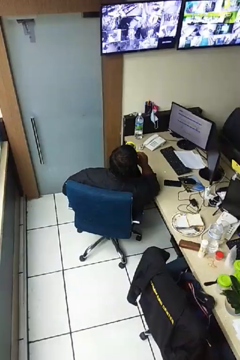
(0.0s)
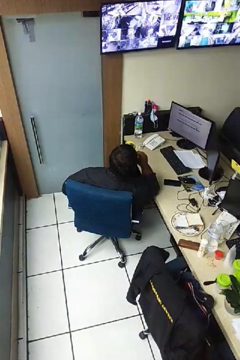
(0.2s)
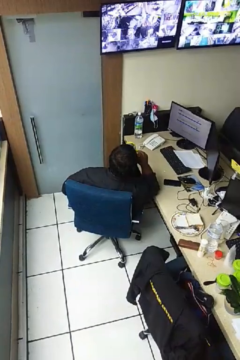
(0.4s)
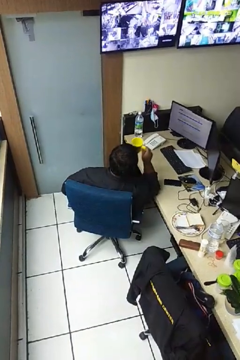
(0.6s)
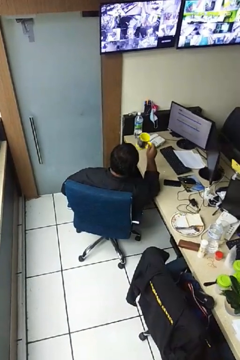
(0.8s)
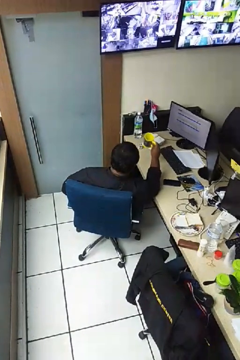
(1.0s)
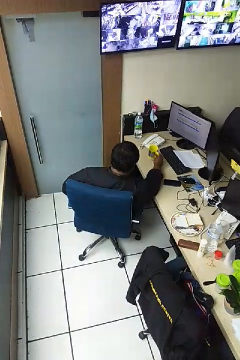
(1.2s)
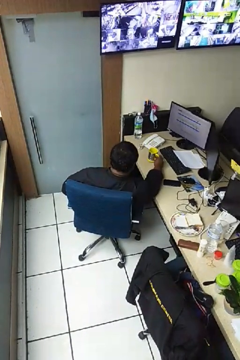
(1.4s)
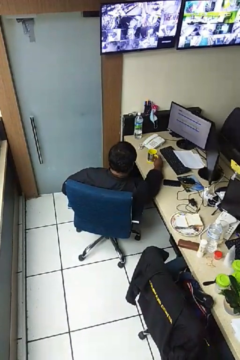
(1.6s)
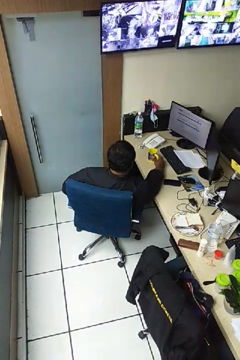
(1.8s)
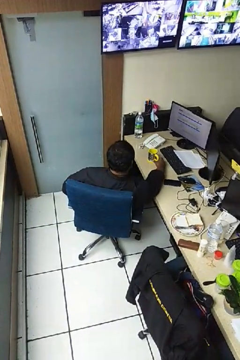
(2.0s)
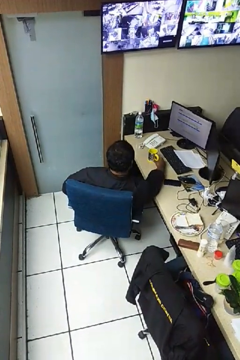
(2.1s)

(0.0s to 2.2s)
person puts down object on table

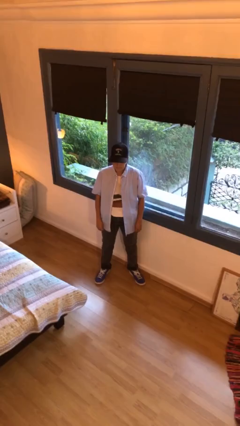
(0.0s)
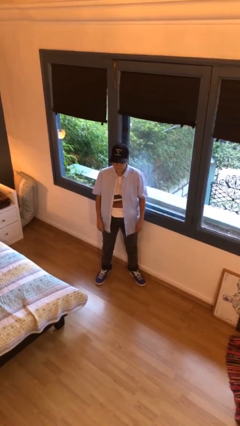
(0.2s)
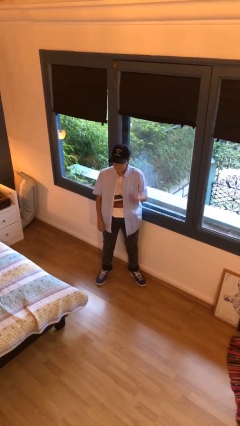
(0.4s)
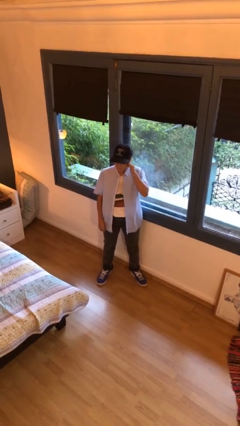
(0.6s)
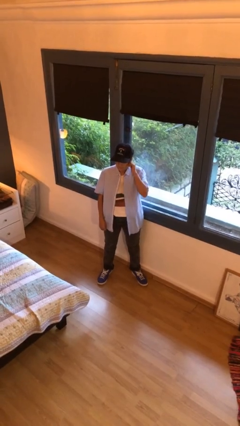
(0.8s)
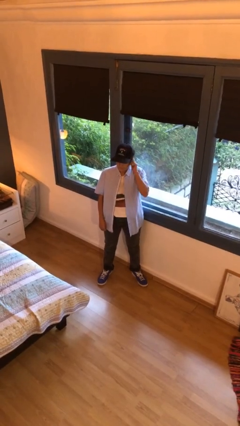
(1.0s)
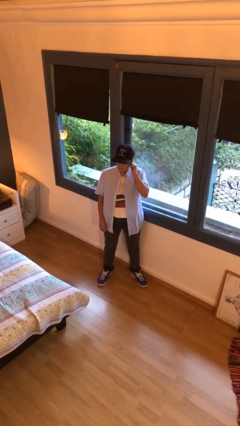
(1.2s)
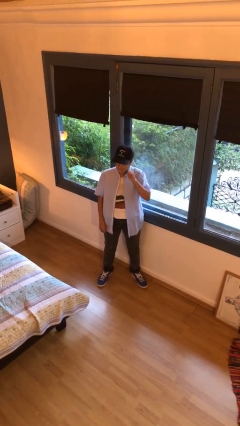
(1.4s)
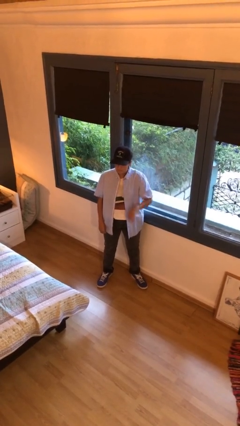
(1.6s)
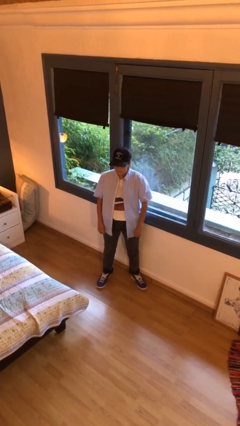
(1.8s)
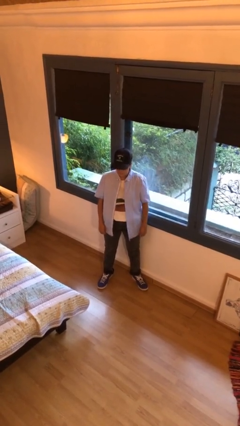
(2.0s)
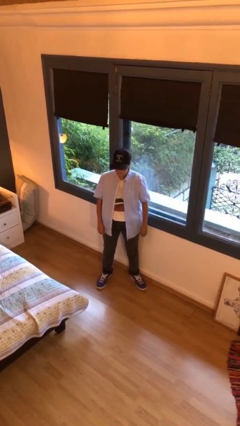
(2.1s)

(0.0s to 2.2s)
person touches earlobe

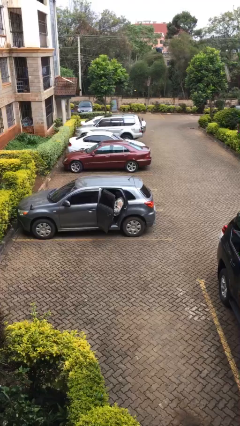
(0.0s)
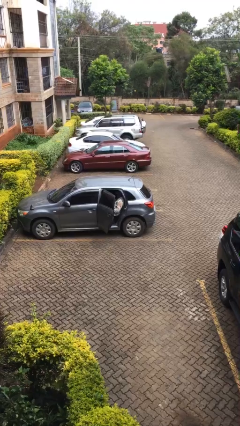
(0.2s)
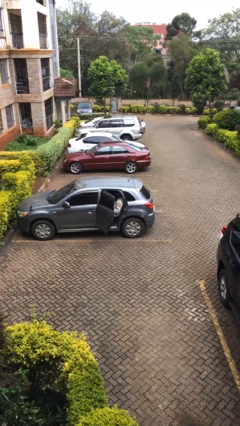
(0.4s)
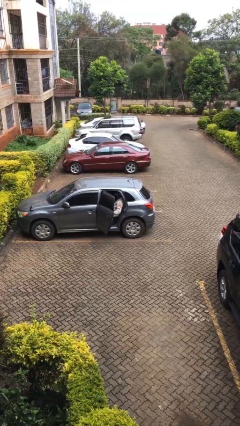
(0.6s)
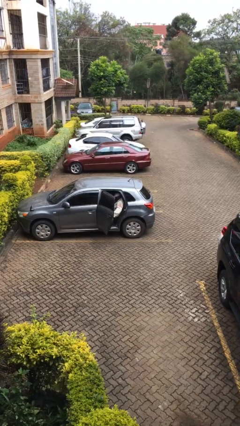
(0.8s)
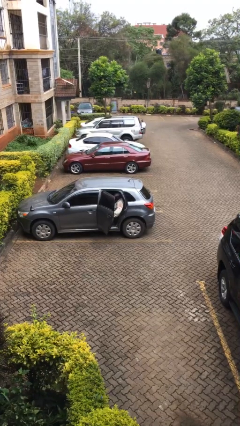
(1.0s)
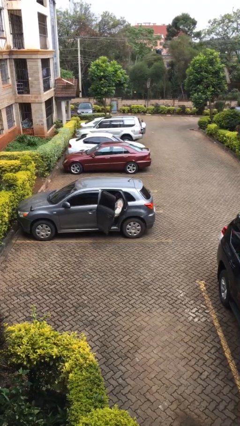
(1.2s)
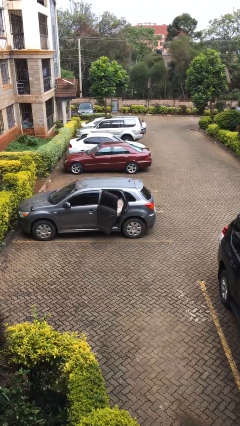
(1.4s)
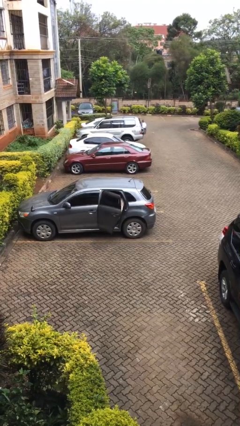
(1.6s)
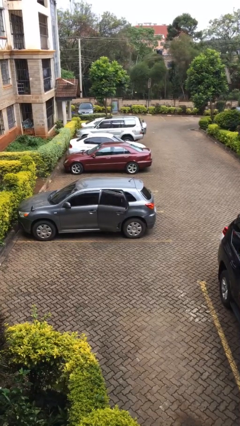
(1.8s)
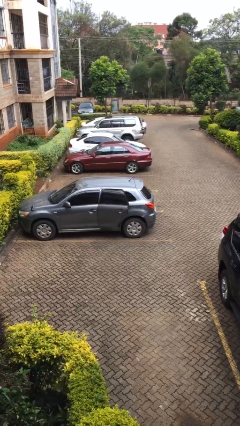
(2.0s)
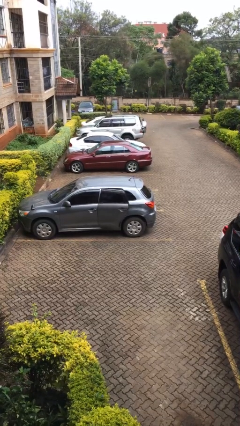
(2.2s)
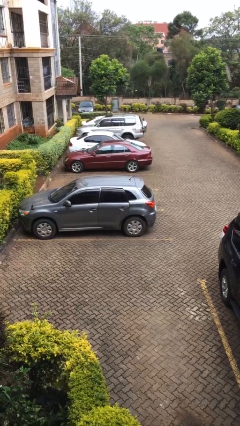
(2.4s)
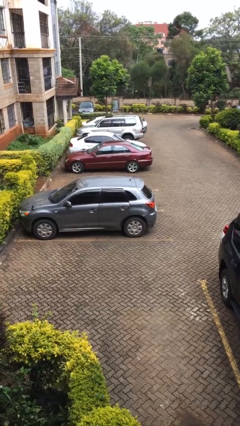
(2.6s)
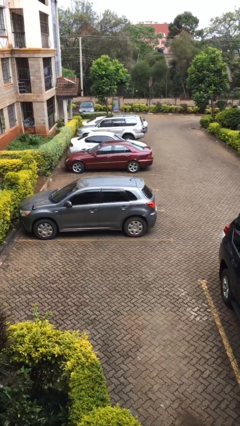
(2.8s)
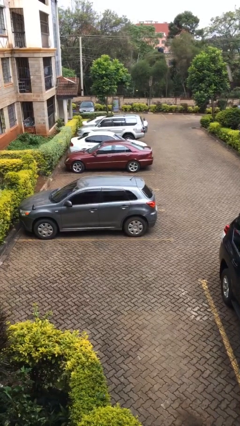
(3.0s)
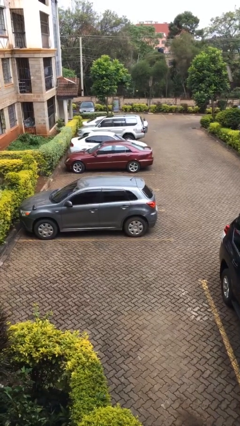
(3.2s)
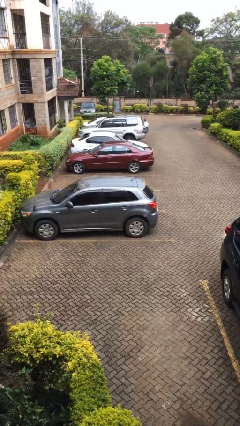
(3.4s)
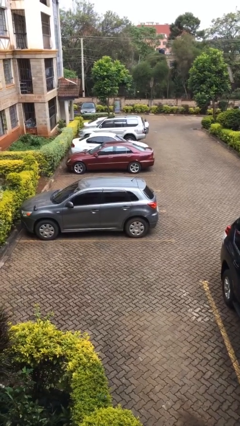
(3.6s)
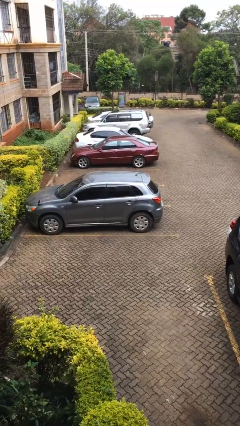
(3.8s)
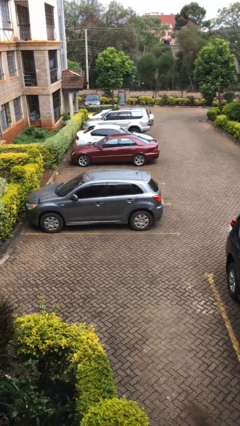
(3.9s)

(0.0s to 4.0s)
person closes car door

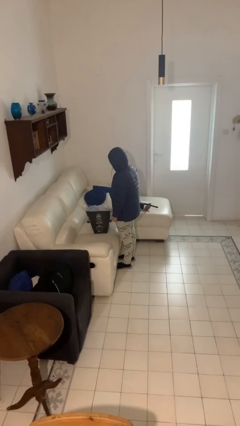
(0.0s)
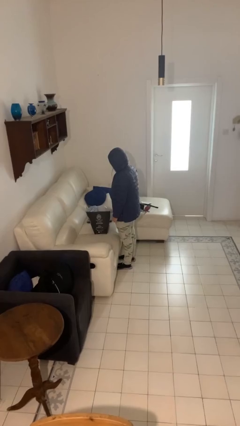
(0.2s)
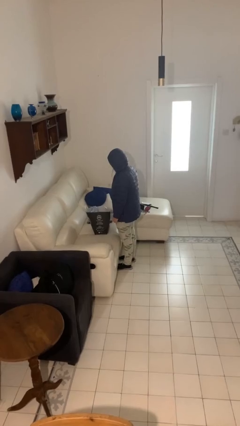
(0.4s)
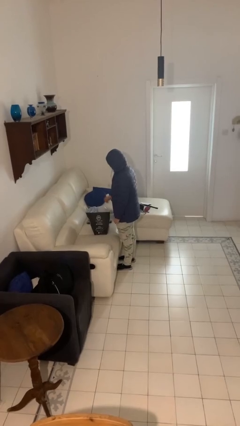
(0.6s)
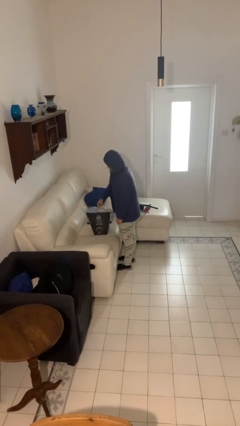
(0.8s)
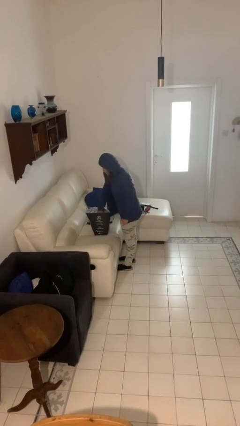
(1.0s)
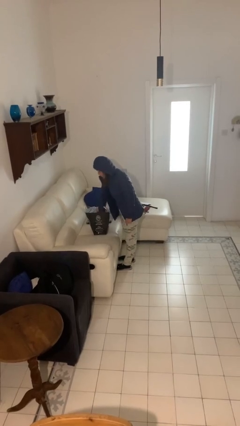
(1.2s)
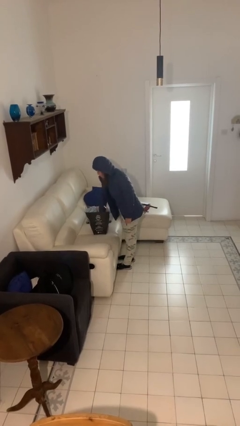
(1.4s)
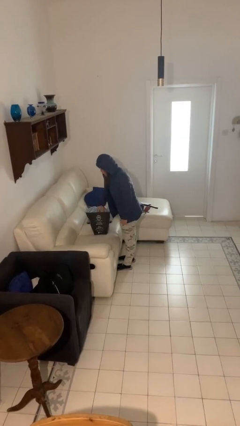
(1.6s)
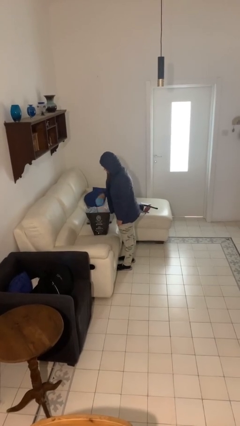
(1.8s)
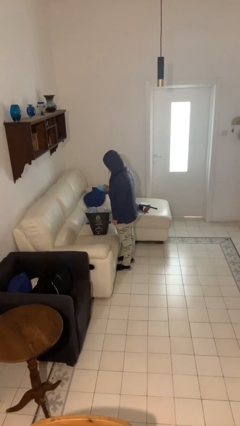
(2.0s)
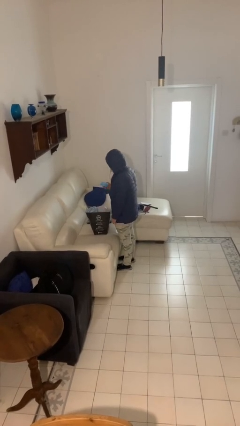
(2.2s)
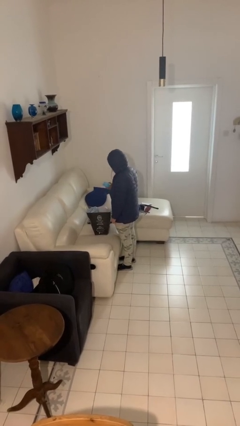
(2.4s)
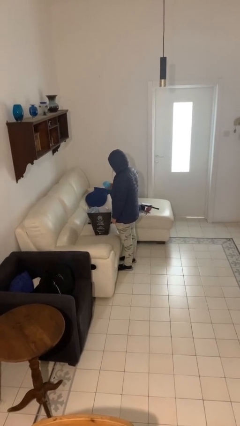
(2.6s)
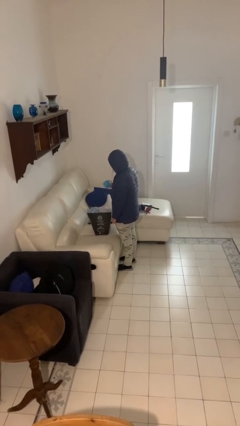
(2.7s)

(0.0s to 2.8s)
person takes object from bag

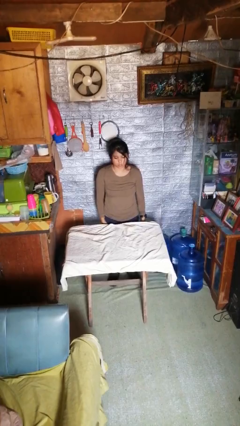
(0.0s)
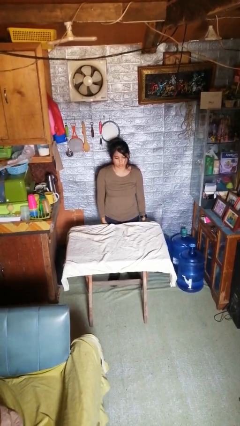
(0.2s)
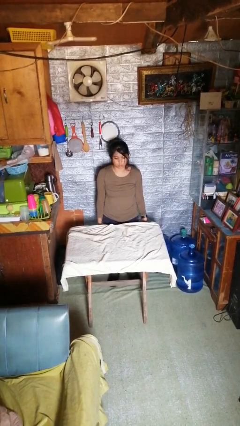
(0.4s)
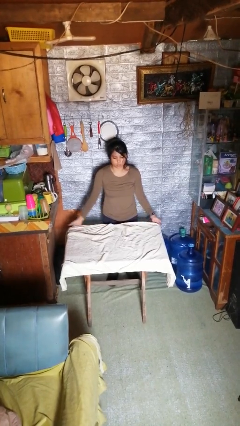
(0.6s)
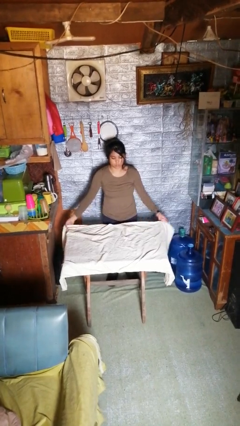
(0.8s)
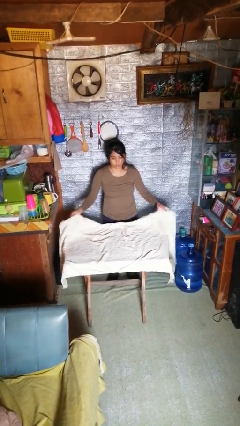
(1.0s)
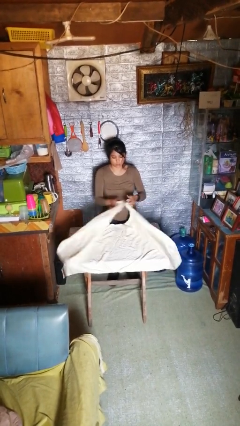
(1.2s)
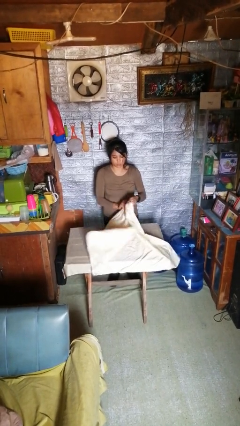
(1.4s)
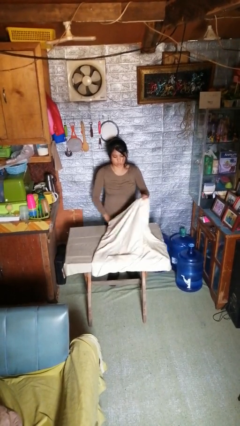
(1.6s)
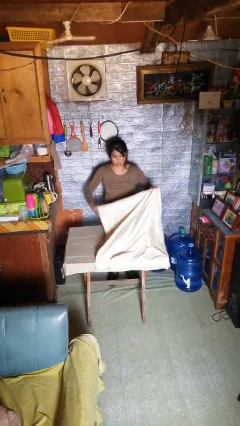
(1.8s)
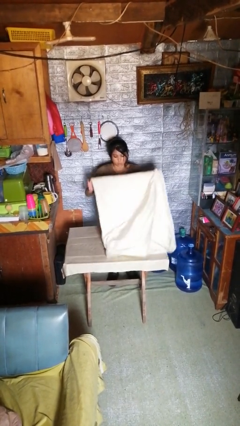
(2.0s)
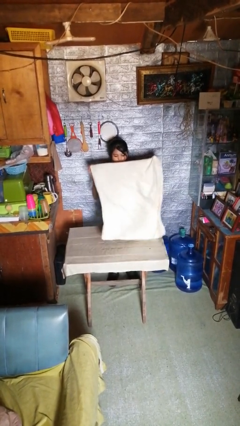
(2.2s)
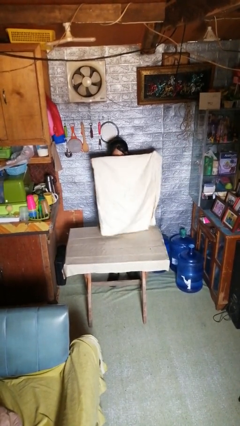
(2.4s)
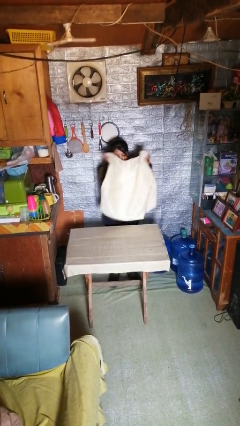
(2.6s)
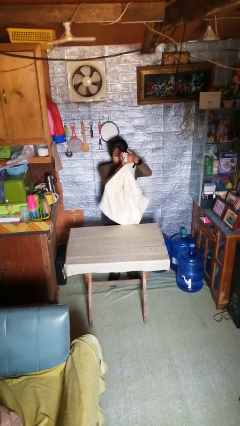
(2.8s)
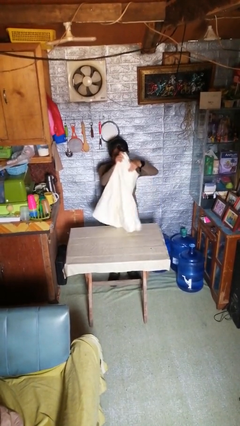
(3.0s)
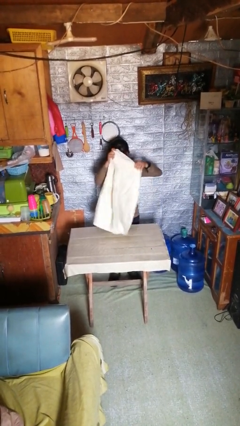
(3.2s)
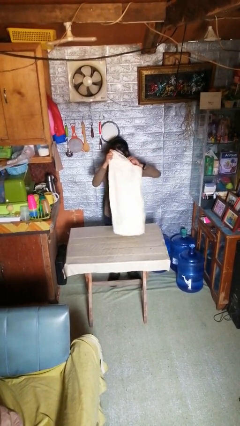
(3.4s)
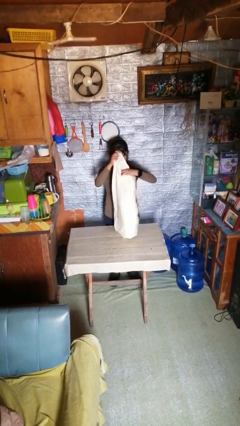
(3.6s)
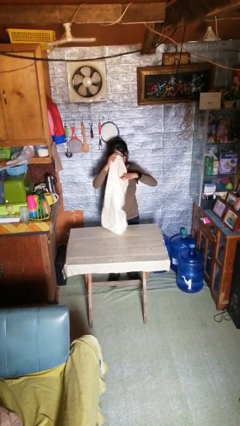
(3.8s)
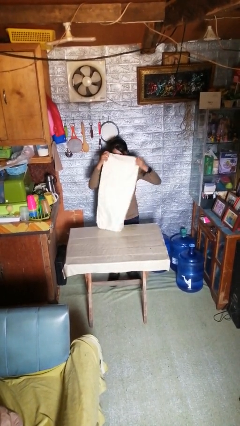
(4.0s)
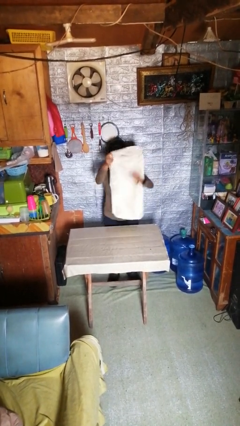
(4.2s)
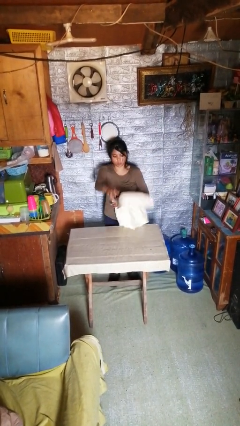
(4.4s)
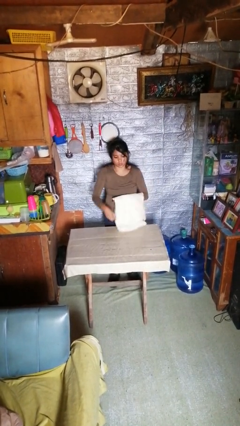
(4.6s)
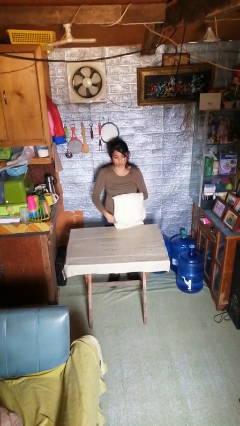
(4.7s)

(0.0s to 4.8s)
person folds tablecloth

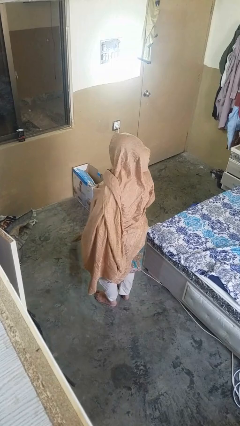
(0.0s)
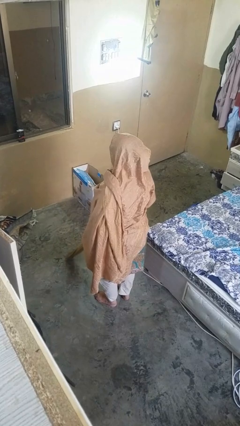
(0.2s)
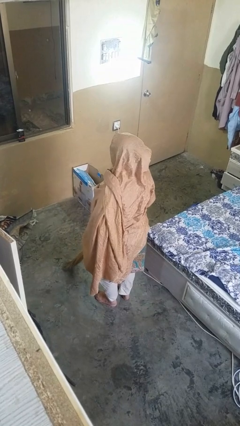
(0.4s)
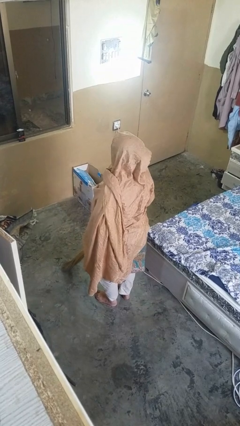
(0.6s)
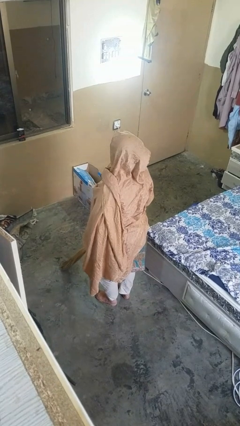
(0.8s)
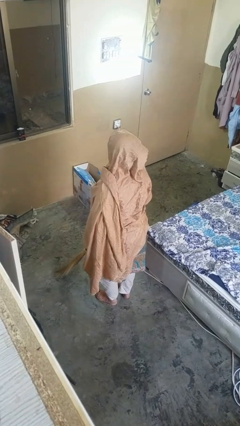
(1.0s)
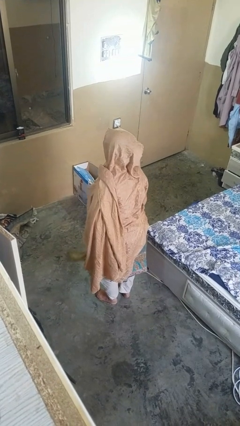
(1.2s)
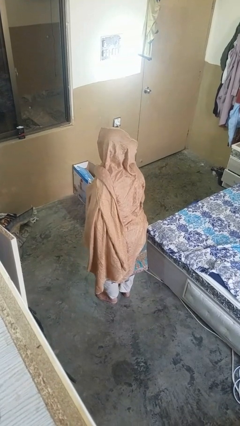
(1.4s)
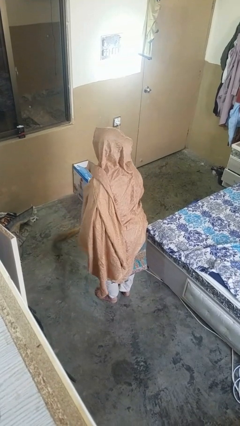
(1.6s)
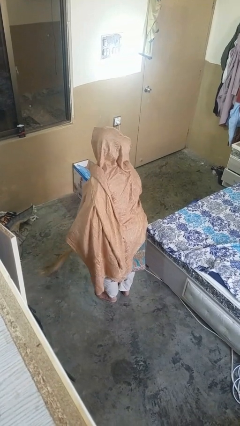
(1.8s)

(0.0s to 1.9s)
person sweeps floor
